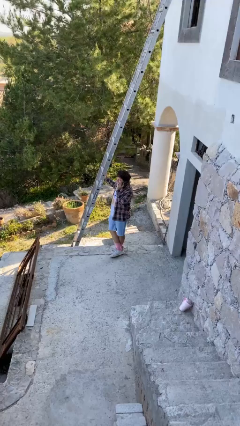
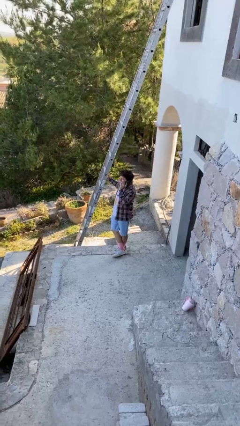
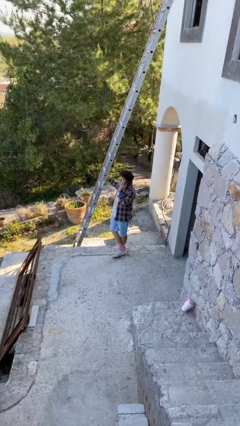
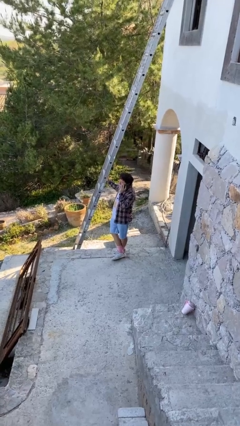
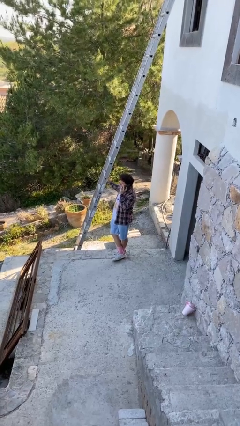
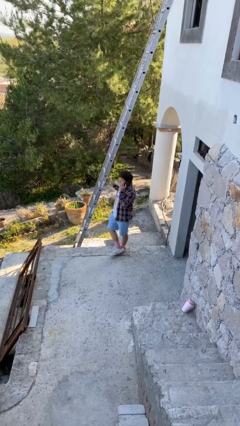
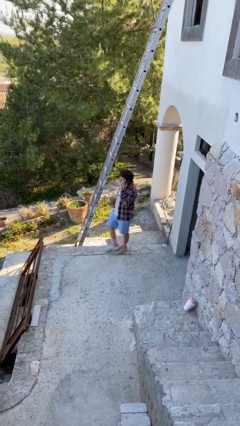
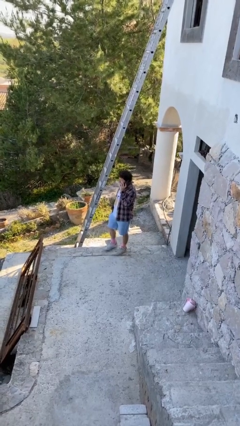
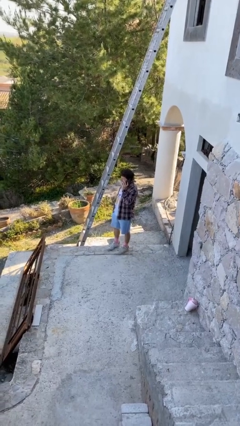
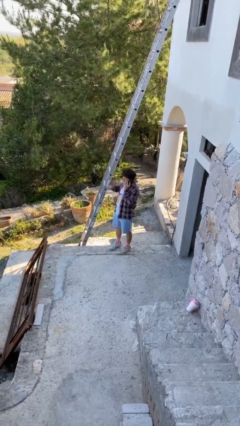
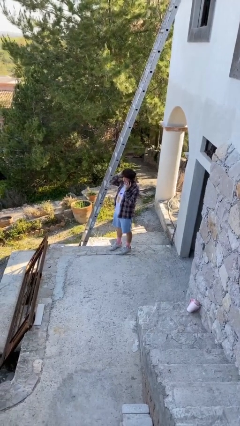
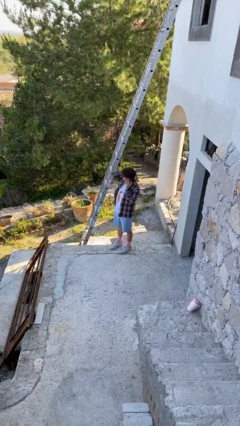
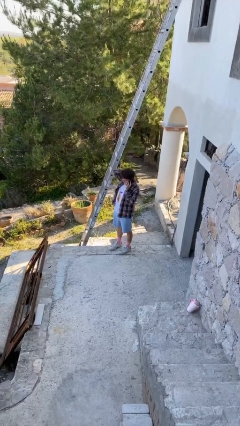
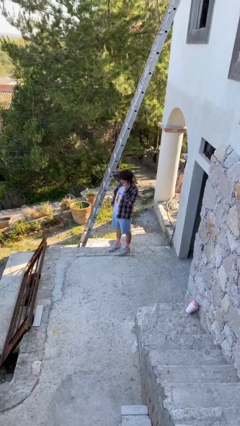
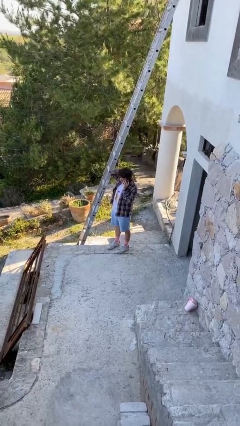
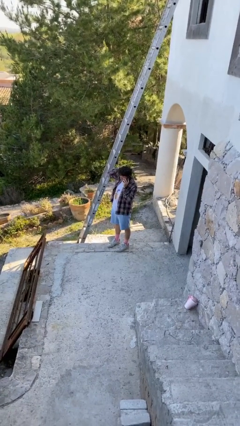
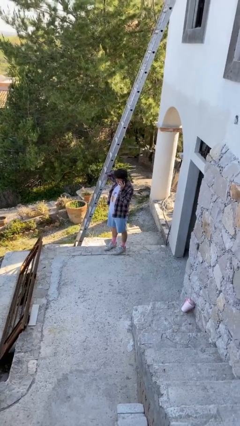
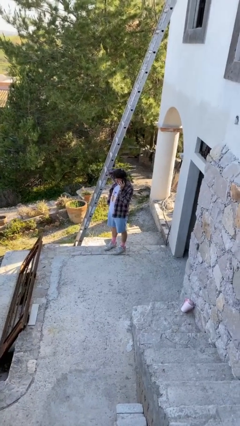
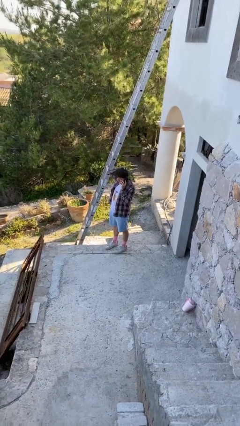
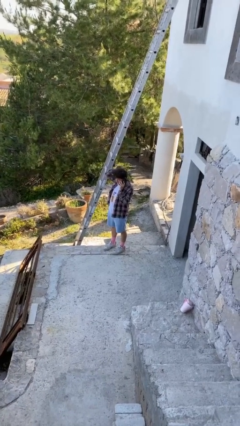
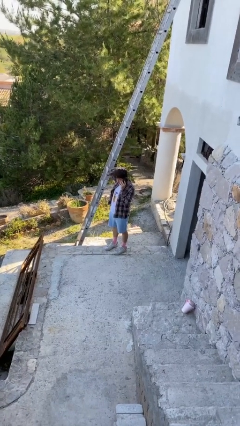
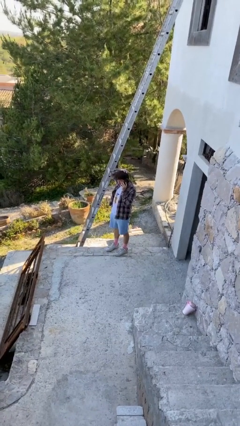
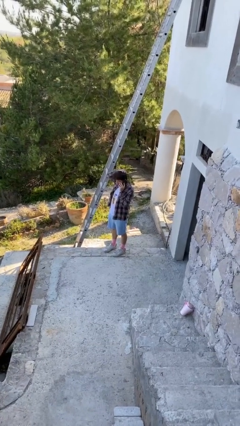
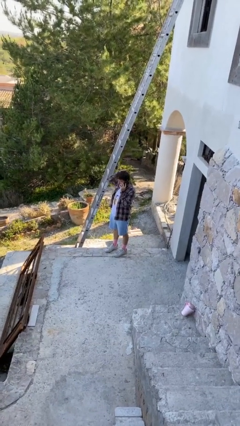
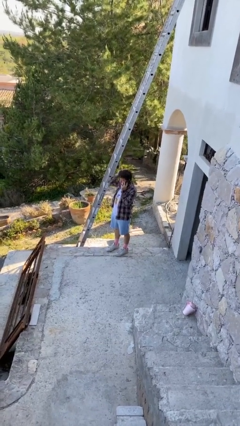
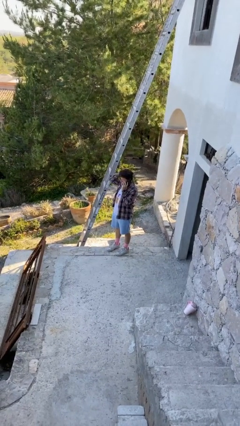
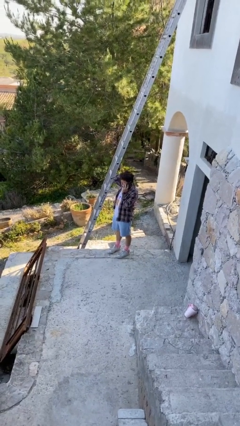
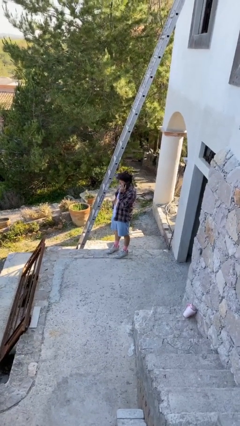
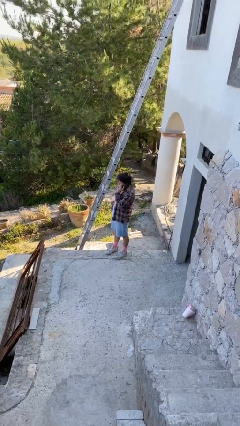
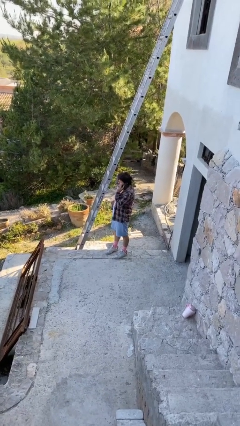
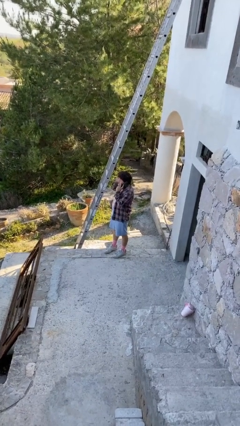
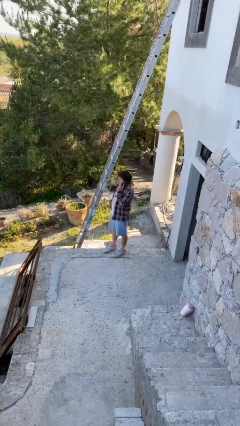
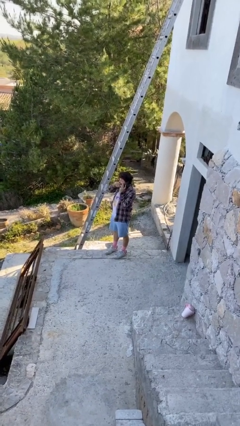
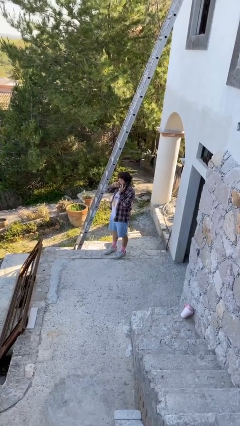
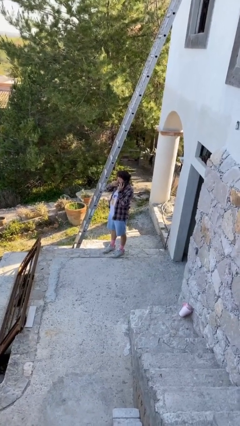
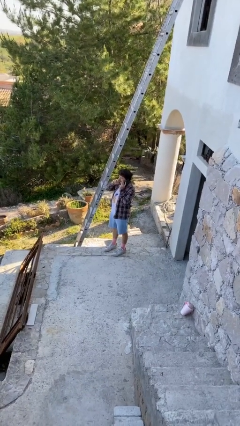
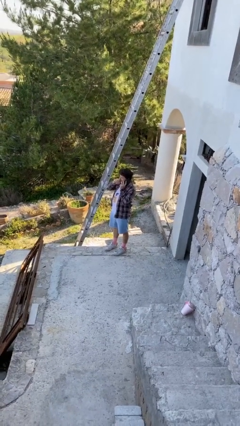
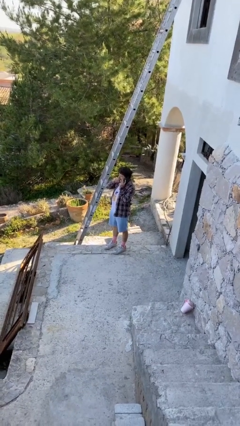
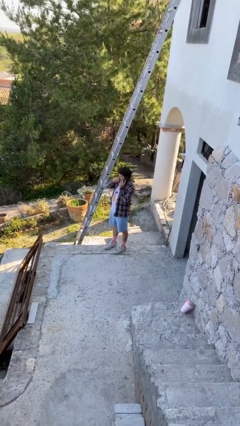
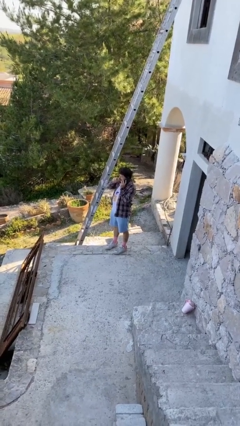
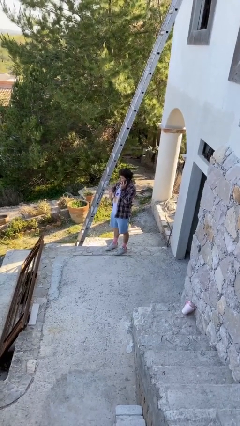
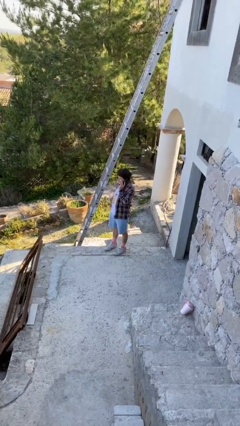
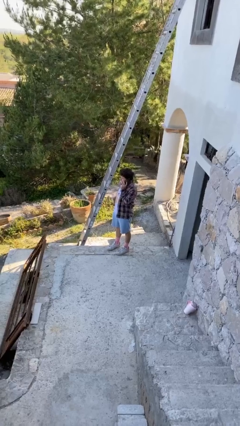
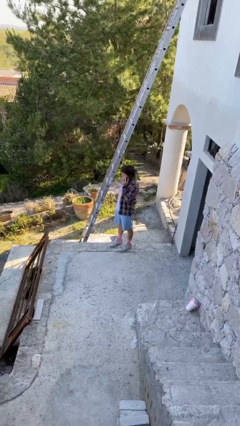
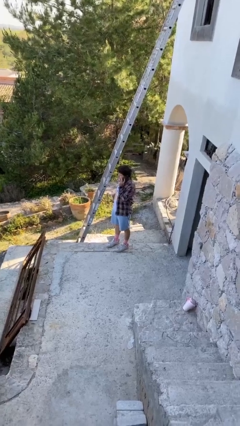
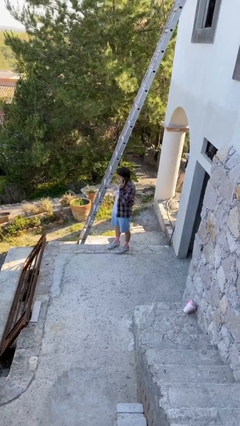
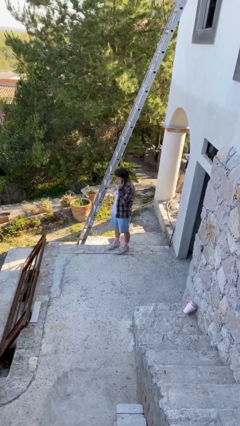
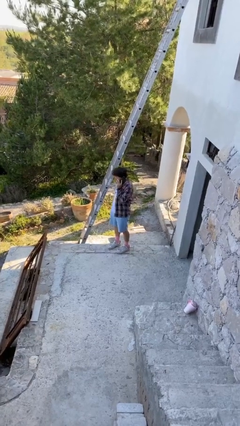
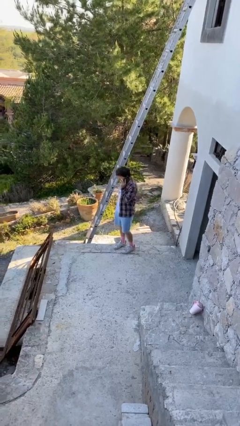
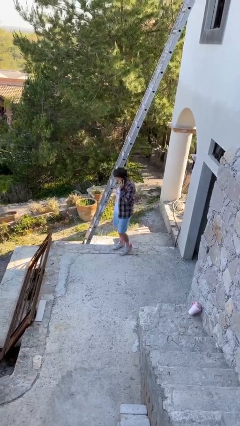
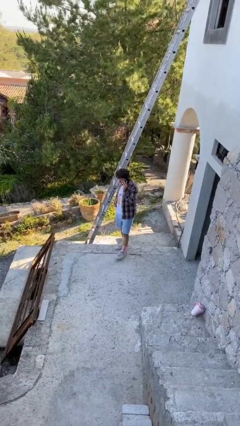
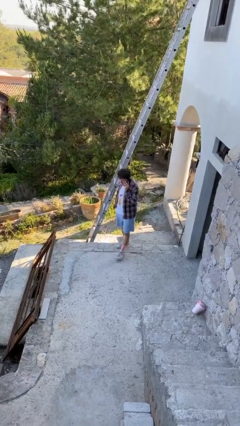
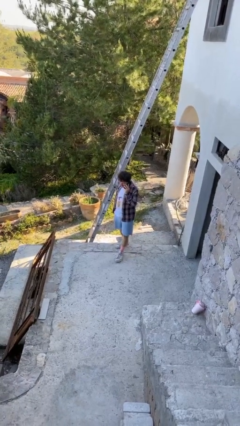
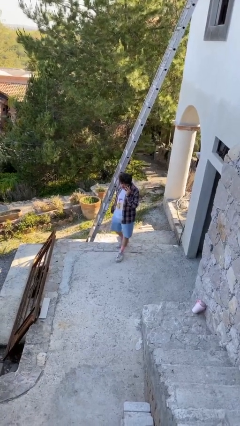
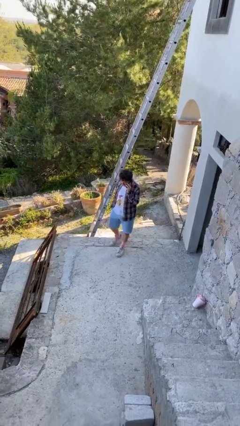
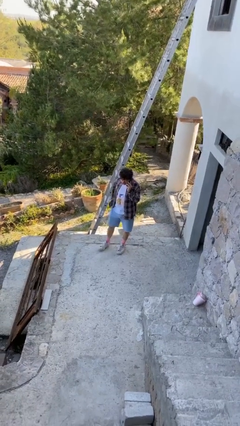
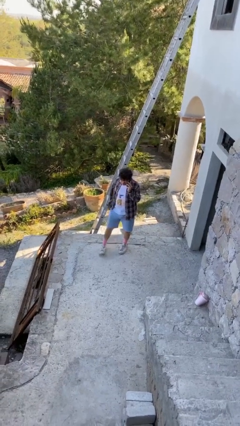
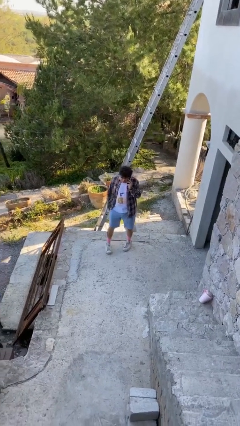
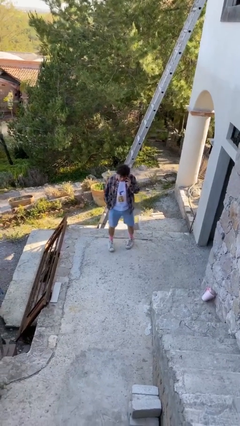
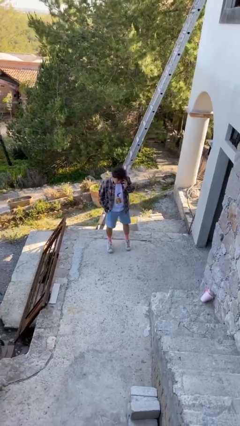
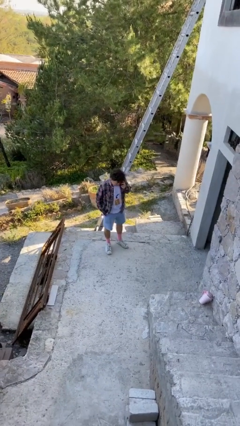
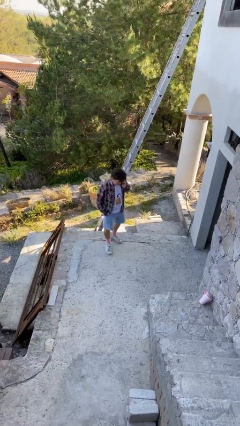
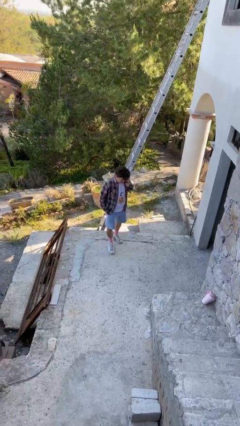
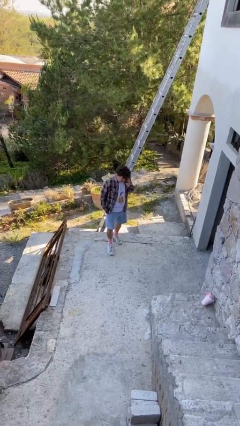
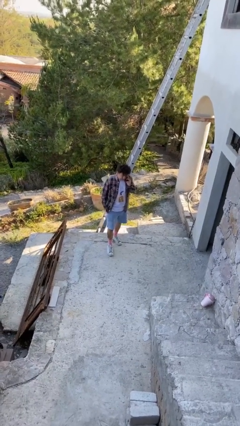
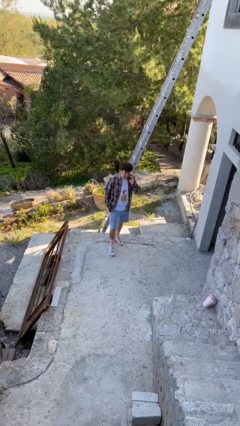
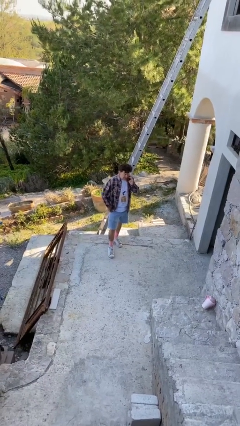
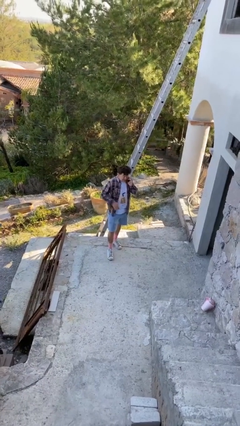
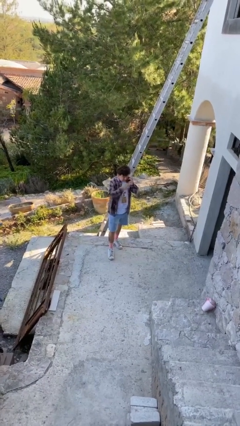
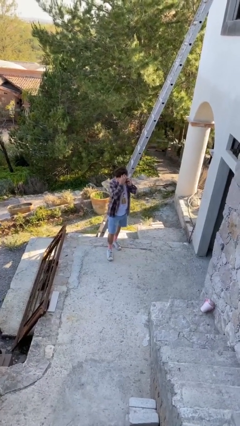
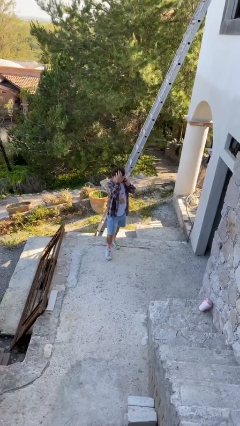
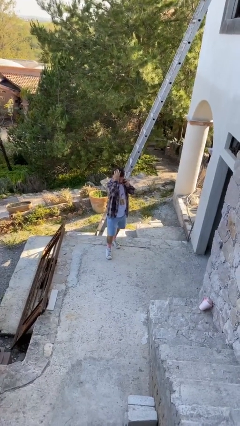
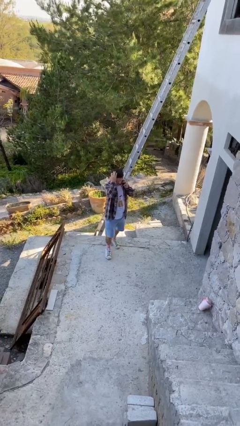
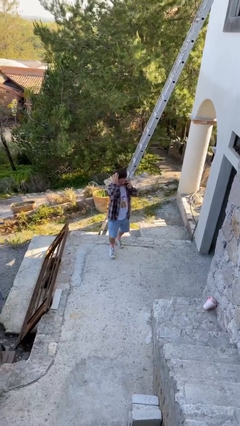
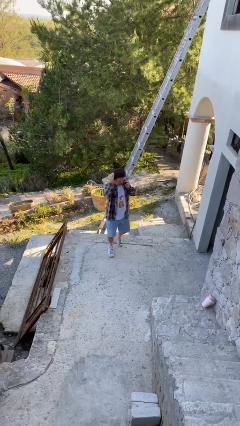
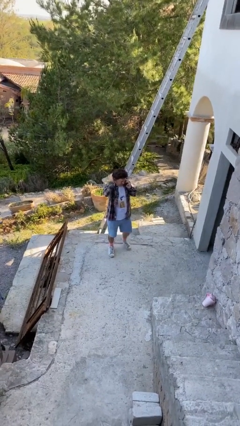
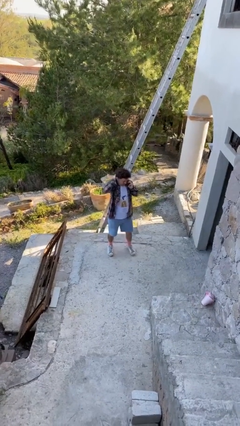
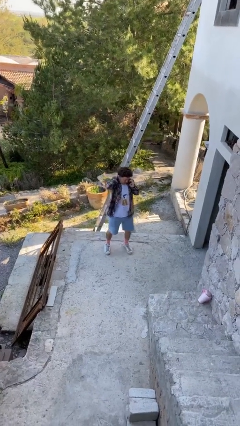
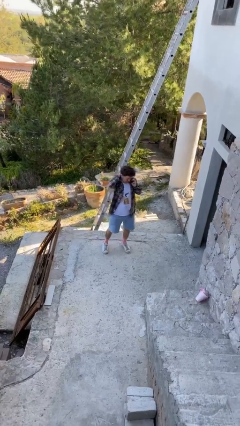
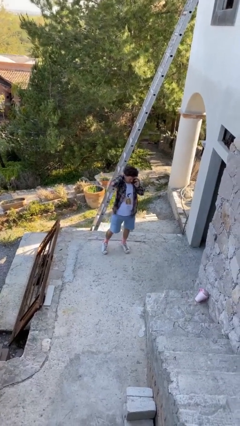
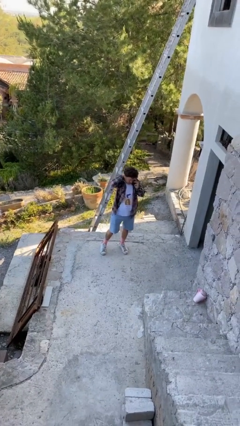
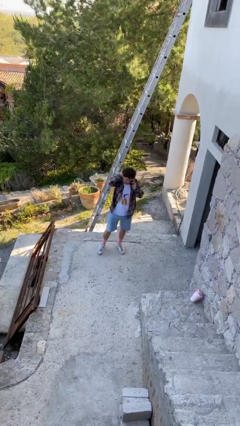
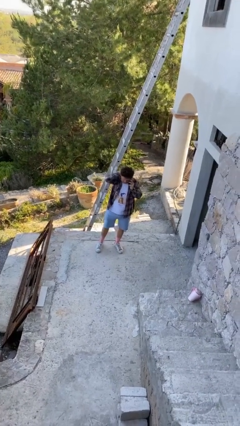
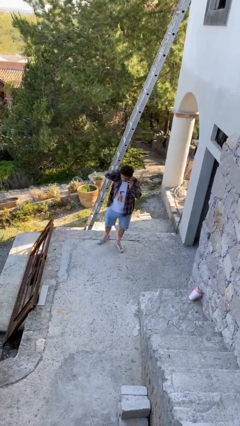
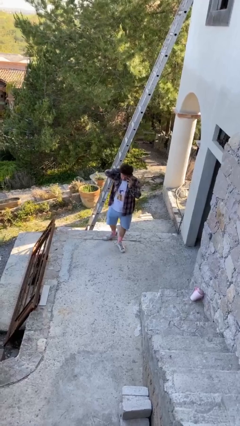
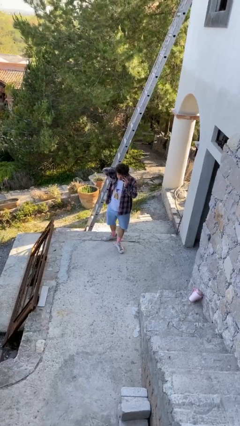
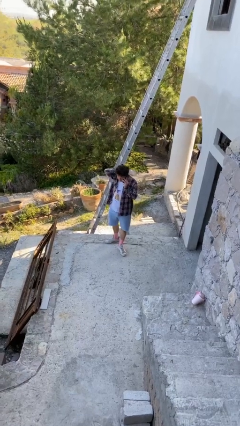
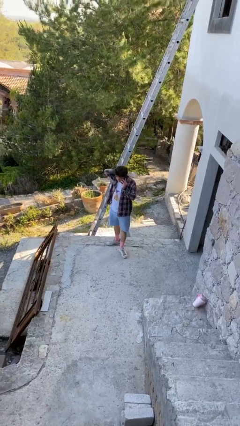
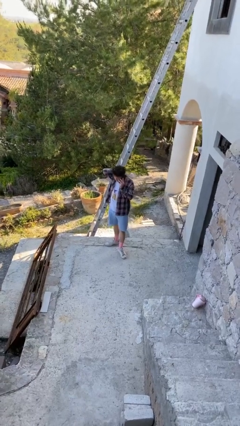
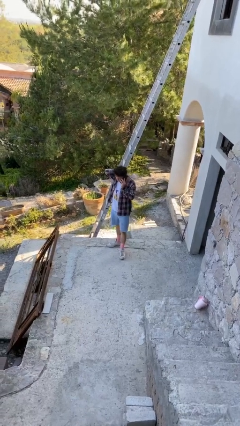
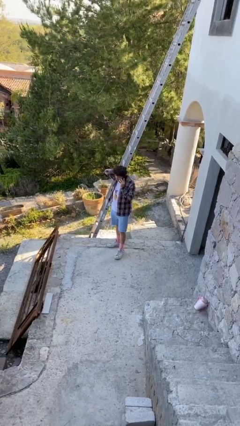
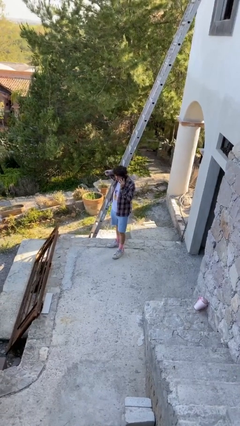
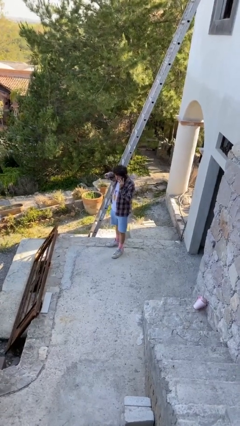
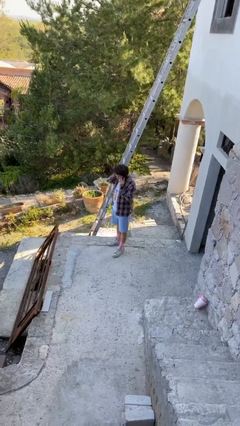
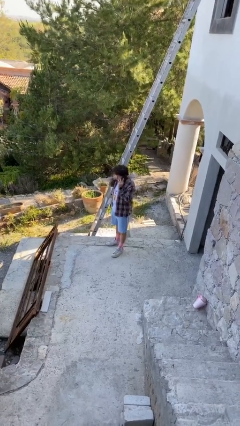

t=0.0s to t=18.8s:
person talks on phone
